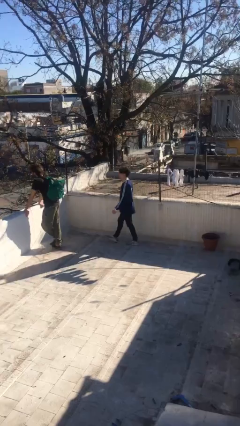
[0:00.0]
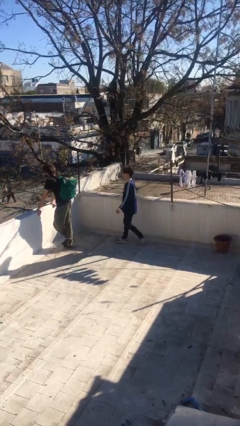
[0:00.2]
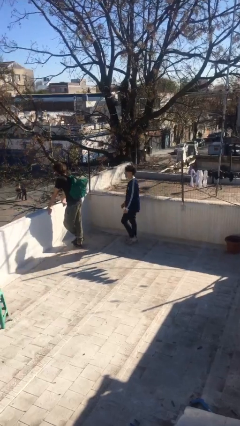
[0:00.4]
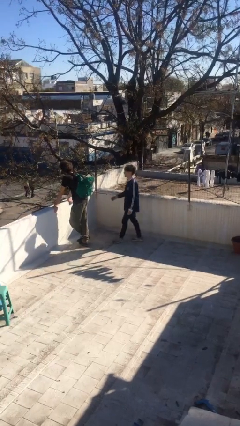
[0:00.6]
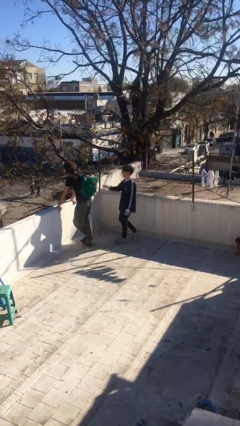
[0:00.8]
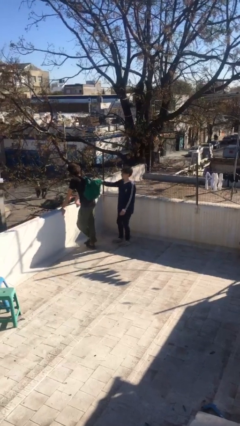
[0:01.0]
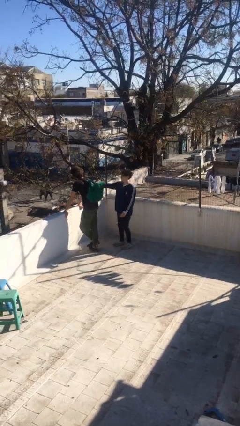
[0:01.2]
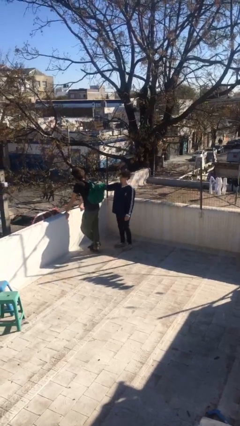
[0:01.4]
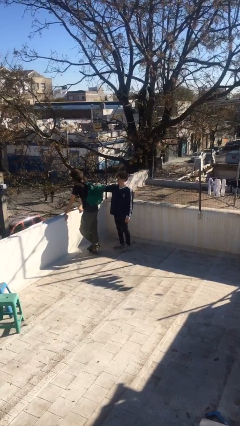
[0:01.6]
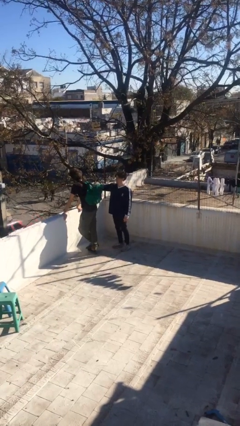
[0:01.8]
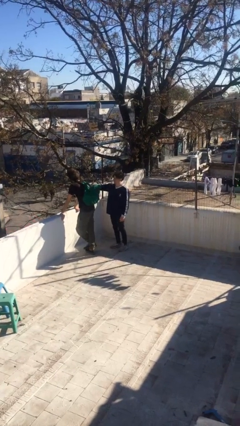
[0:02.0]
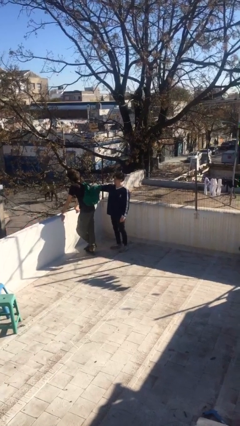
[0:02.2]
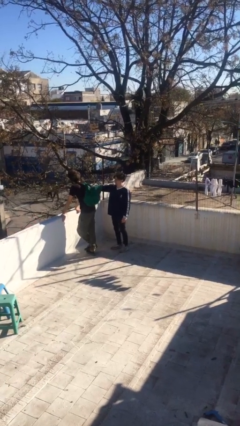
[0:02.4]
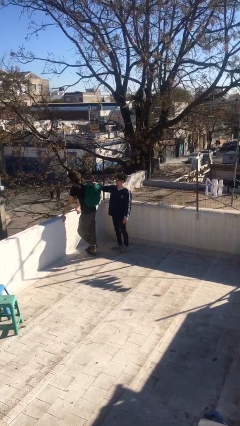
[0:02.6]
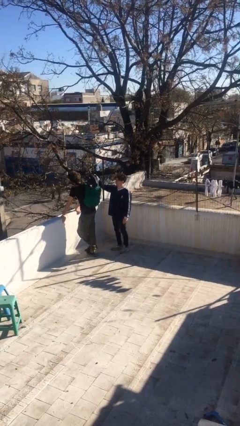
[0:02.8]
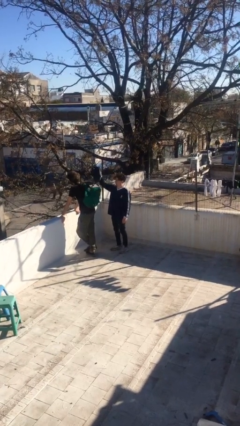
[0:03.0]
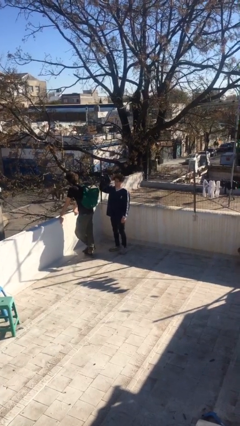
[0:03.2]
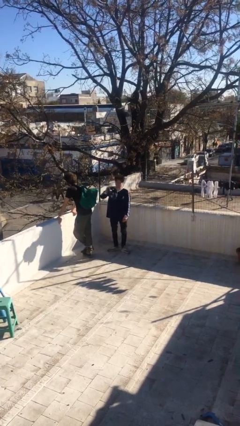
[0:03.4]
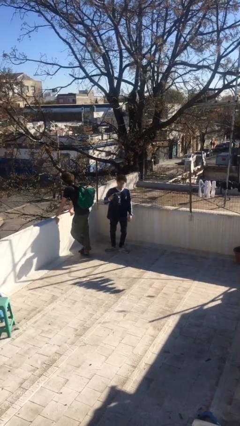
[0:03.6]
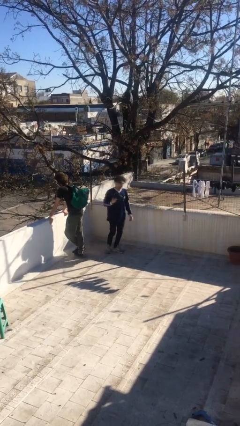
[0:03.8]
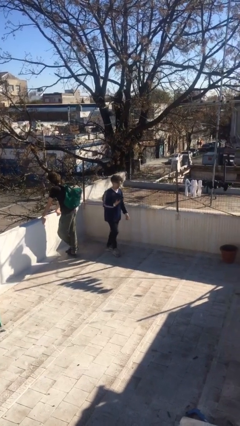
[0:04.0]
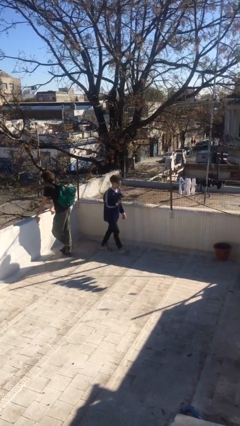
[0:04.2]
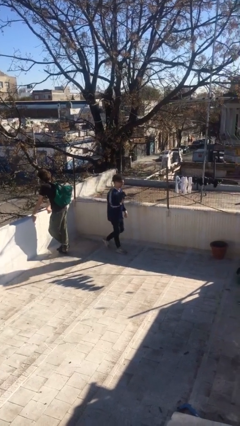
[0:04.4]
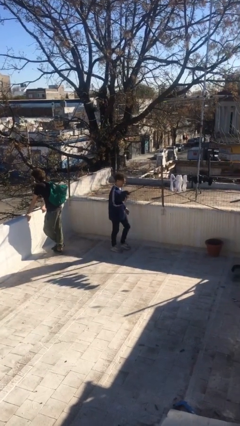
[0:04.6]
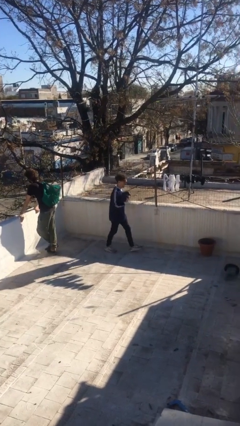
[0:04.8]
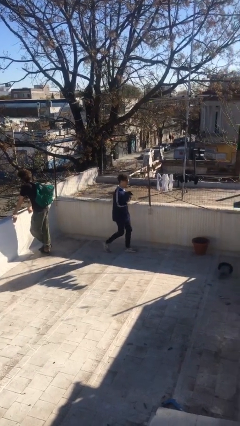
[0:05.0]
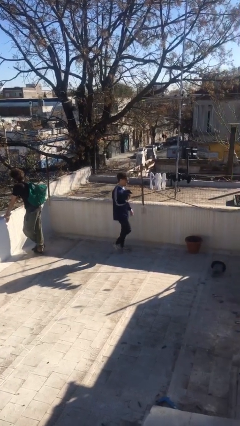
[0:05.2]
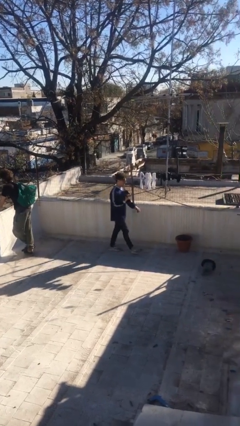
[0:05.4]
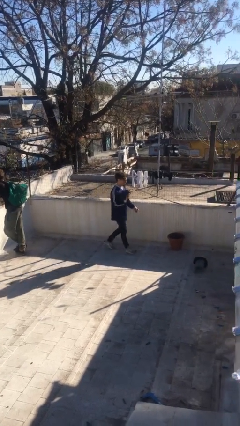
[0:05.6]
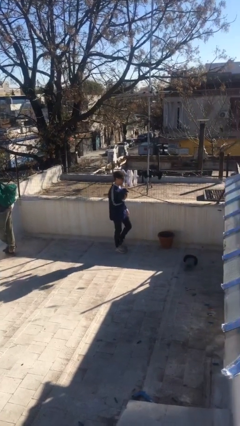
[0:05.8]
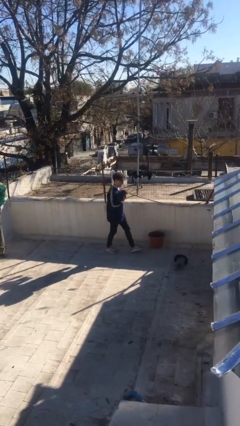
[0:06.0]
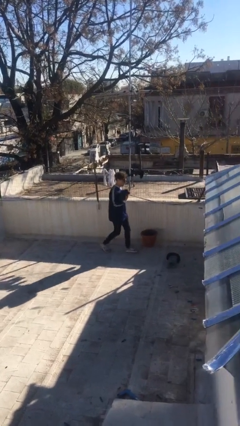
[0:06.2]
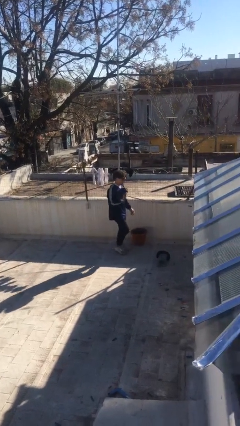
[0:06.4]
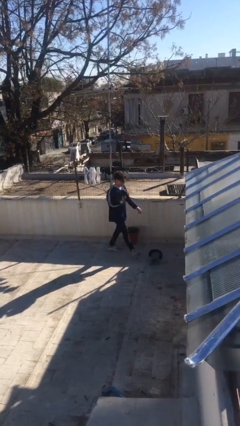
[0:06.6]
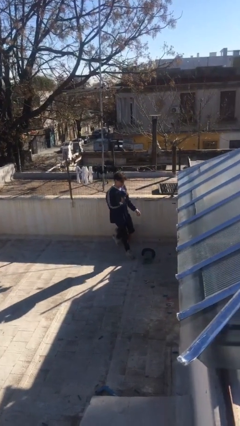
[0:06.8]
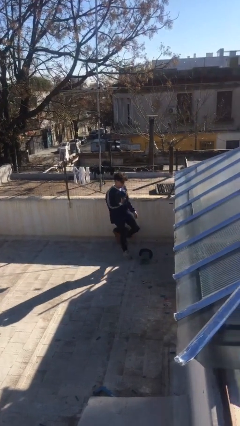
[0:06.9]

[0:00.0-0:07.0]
person steals object from person

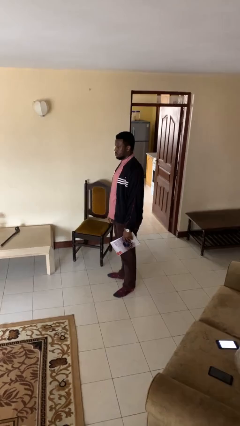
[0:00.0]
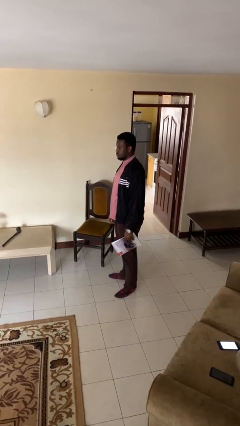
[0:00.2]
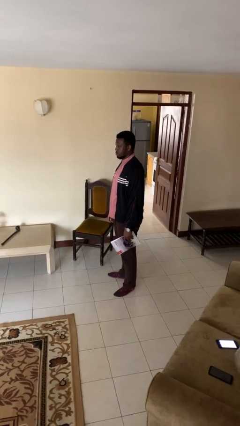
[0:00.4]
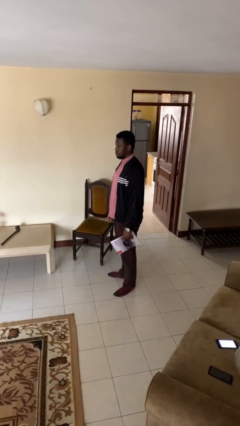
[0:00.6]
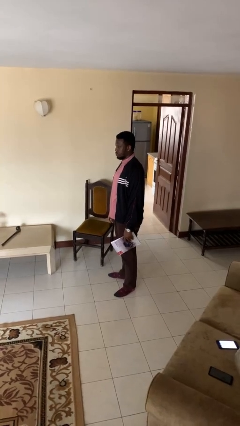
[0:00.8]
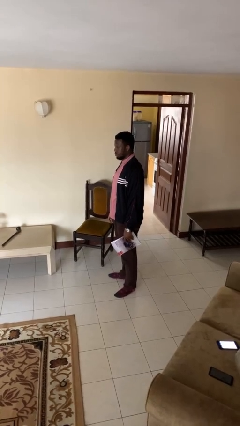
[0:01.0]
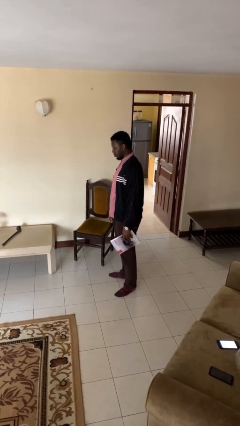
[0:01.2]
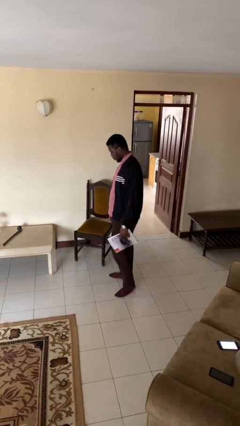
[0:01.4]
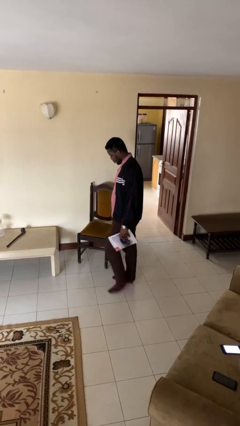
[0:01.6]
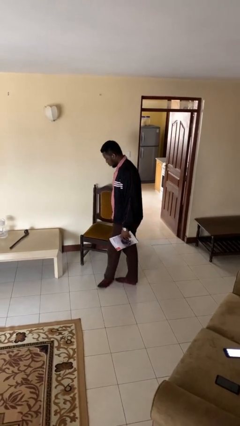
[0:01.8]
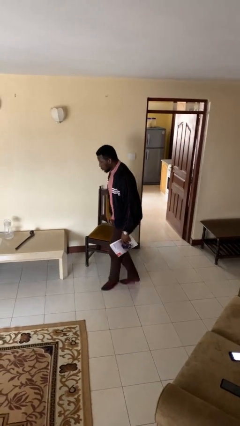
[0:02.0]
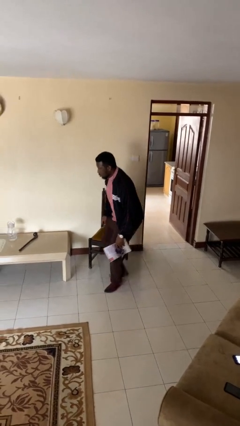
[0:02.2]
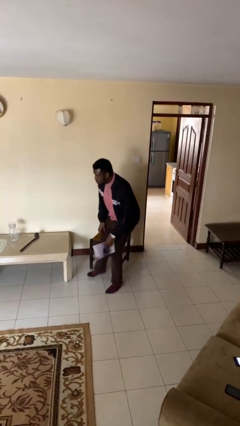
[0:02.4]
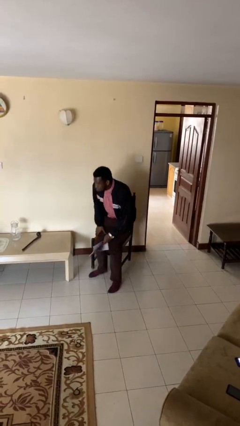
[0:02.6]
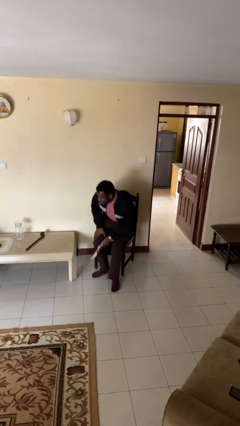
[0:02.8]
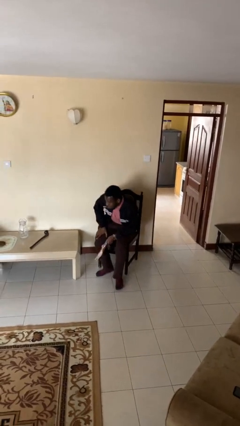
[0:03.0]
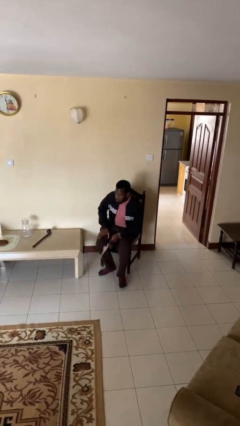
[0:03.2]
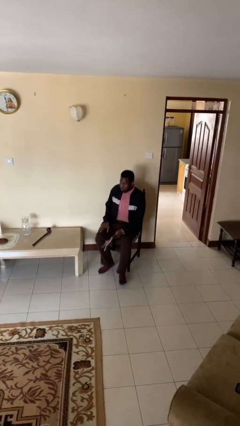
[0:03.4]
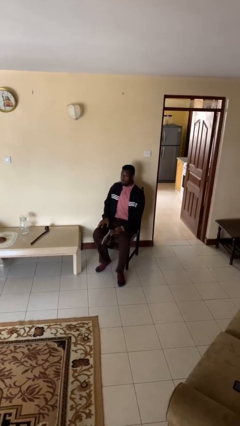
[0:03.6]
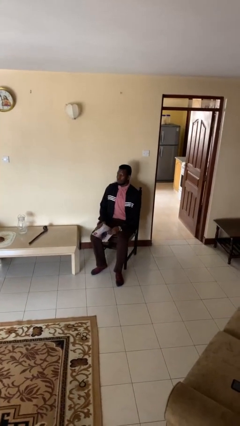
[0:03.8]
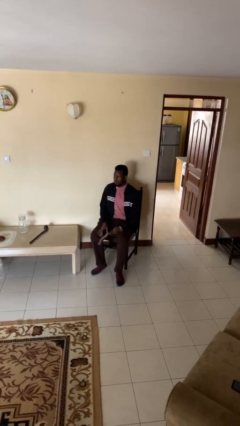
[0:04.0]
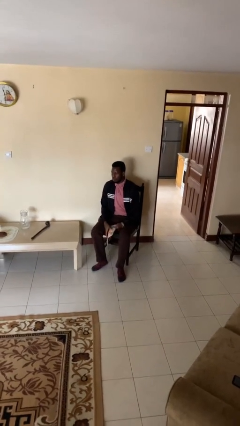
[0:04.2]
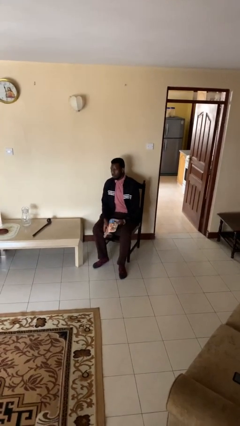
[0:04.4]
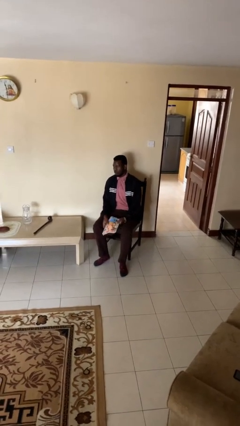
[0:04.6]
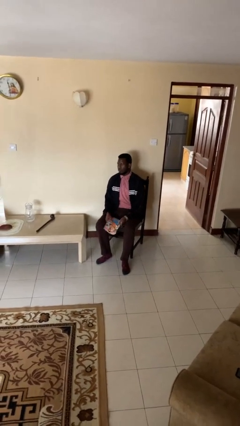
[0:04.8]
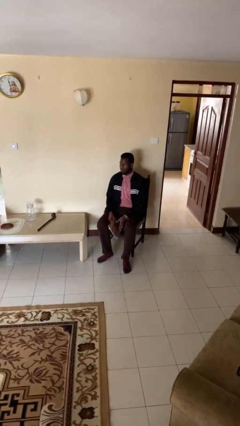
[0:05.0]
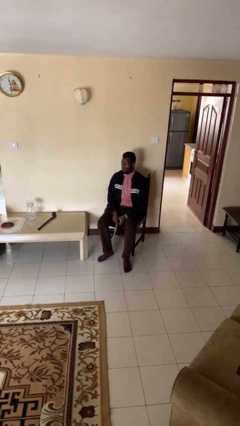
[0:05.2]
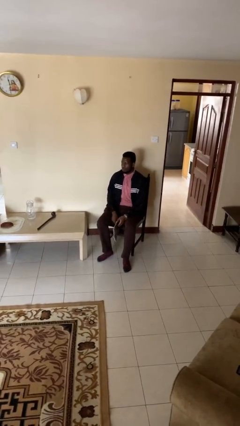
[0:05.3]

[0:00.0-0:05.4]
person sits down

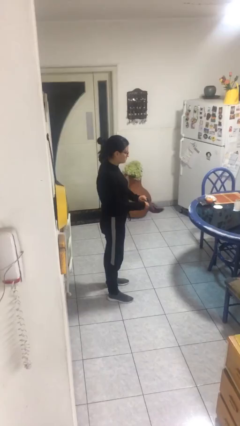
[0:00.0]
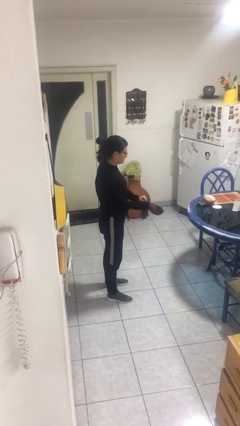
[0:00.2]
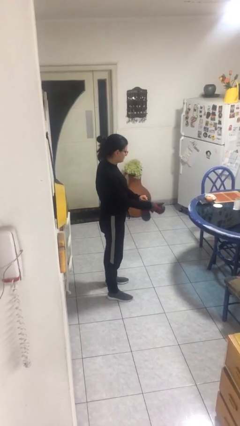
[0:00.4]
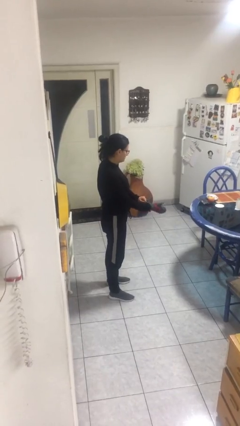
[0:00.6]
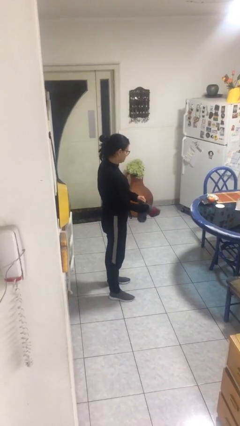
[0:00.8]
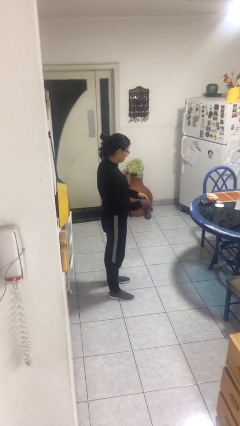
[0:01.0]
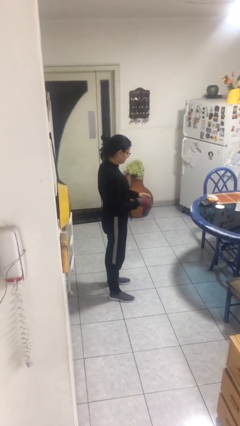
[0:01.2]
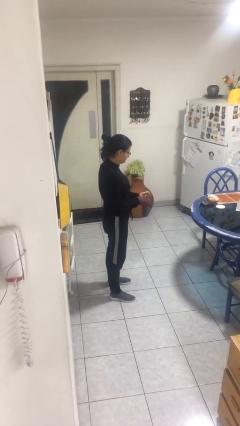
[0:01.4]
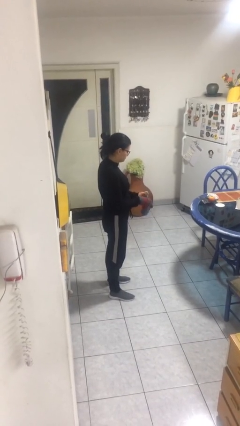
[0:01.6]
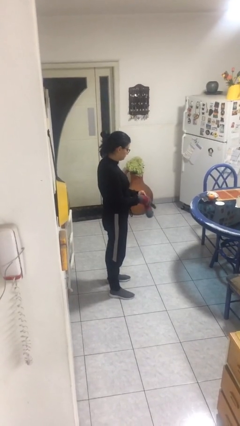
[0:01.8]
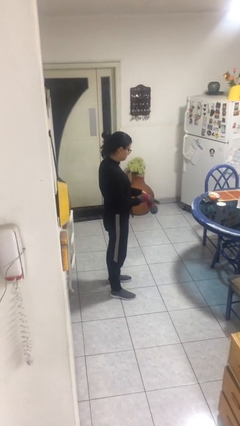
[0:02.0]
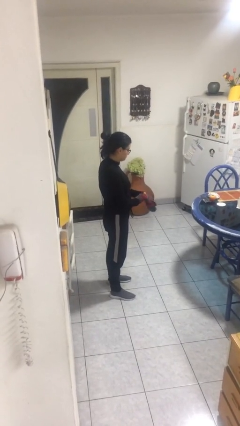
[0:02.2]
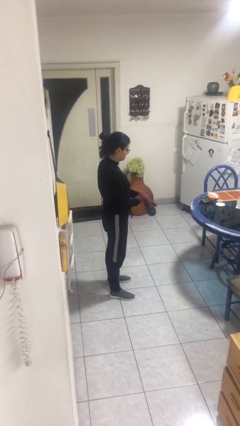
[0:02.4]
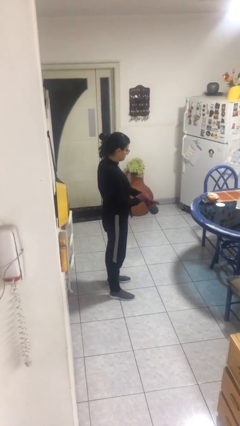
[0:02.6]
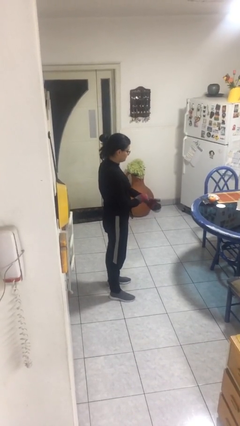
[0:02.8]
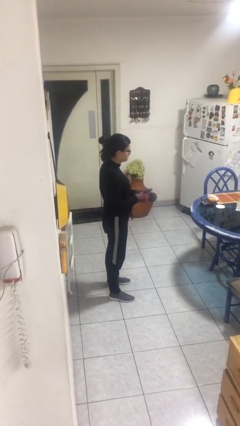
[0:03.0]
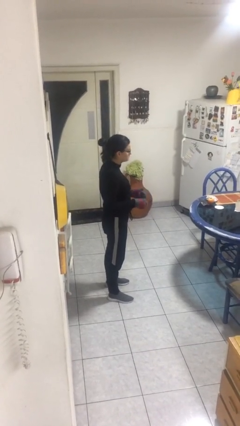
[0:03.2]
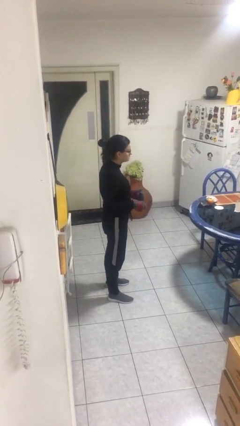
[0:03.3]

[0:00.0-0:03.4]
person puts on gloves

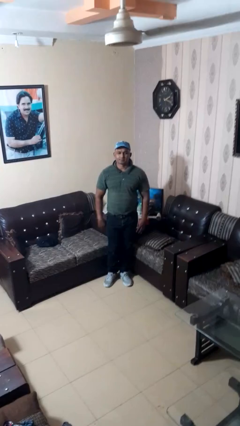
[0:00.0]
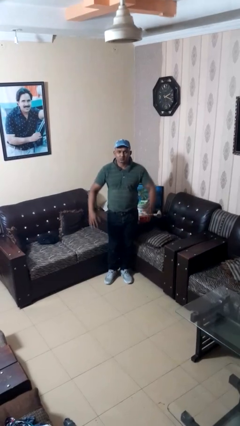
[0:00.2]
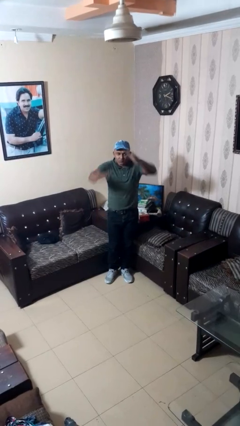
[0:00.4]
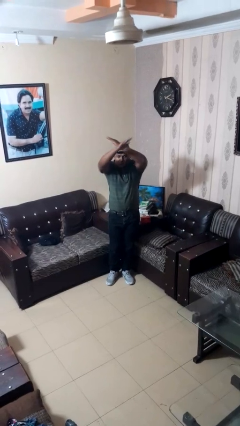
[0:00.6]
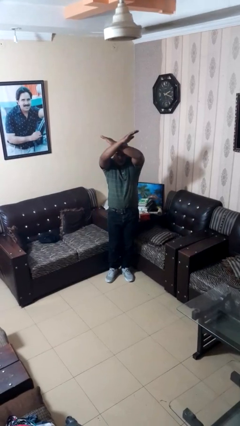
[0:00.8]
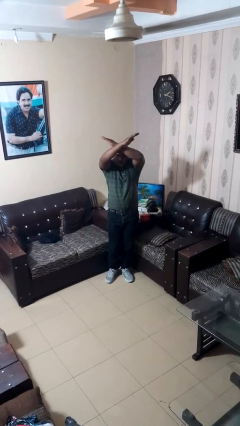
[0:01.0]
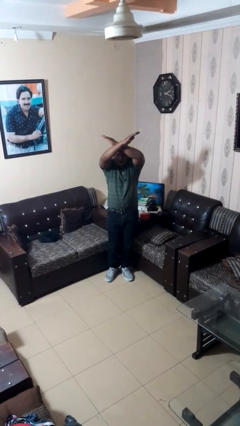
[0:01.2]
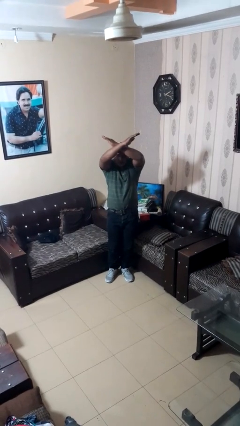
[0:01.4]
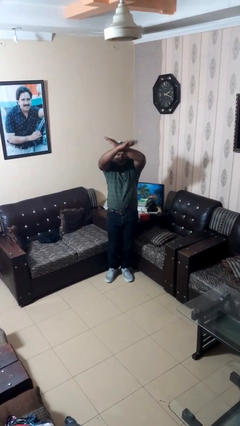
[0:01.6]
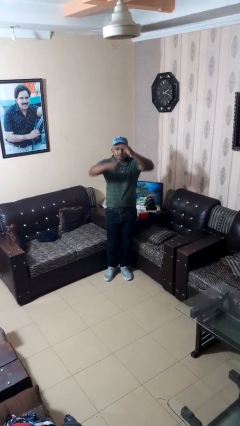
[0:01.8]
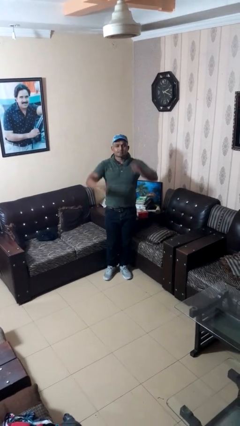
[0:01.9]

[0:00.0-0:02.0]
person gestures arms x
